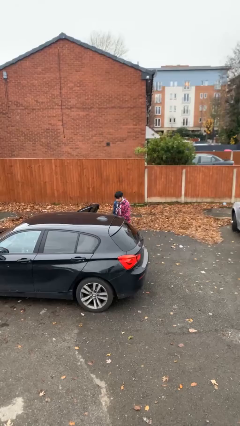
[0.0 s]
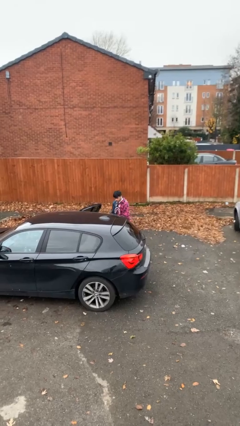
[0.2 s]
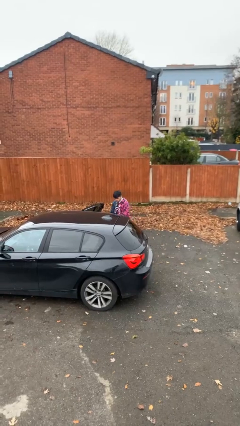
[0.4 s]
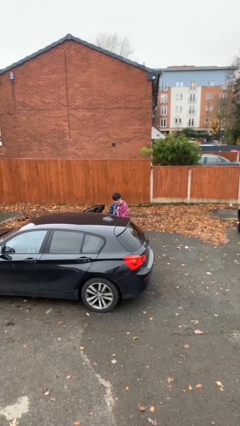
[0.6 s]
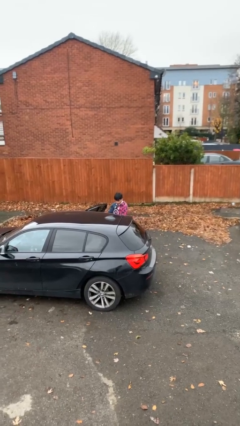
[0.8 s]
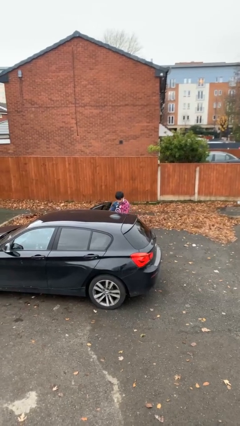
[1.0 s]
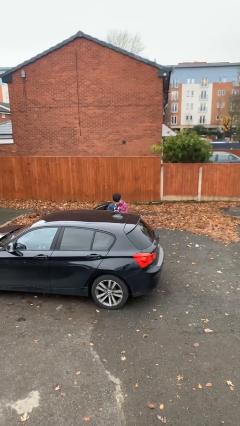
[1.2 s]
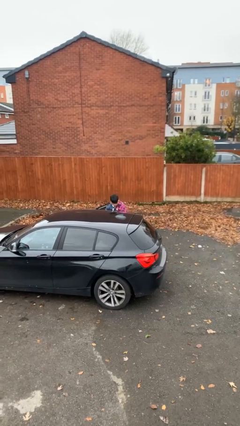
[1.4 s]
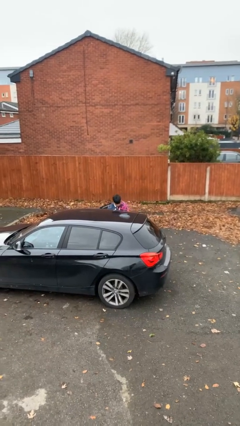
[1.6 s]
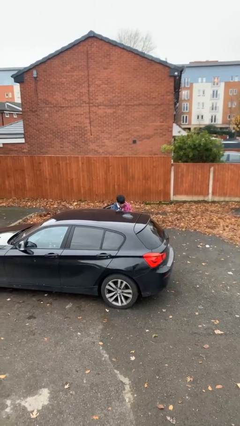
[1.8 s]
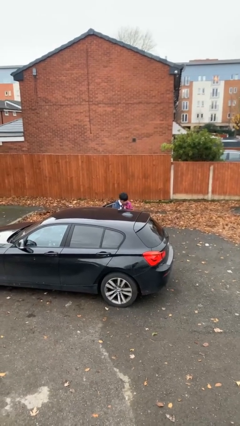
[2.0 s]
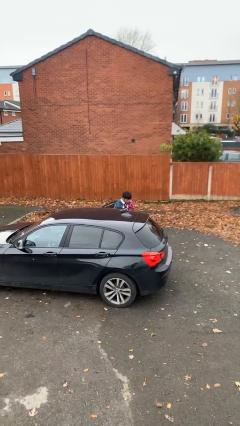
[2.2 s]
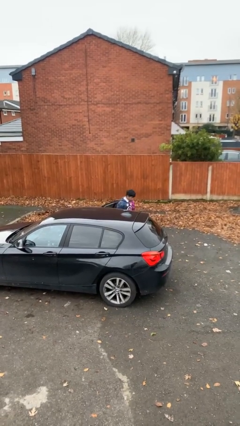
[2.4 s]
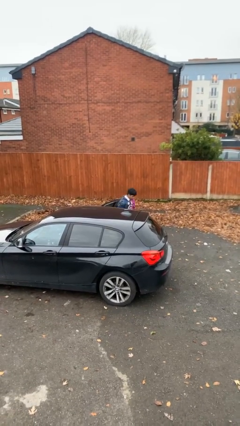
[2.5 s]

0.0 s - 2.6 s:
person loads car

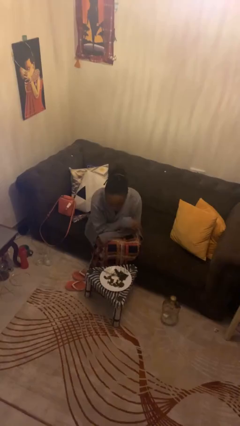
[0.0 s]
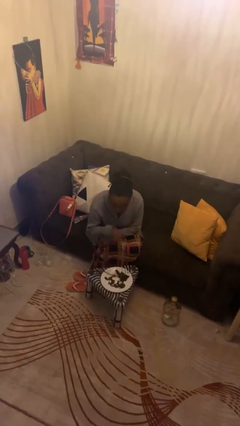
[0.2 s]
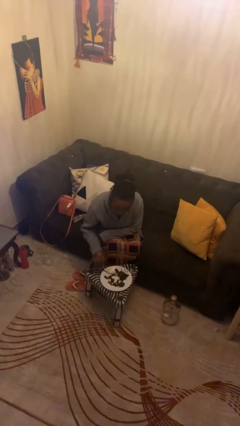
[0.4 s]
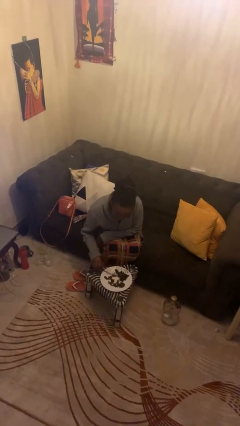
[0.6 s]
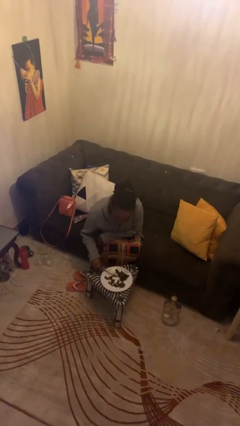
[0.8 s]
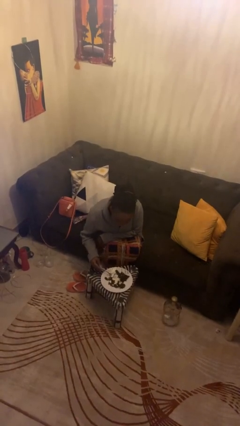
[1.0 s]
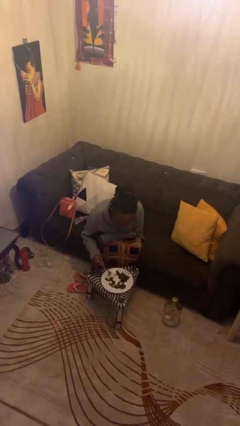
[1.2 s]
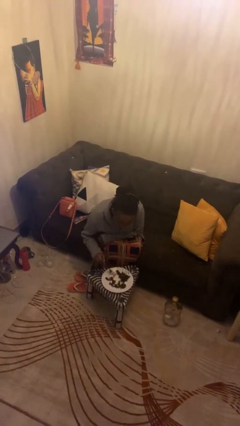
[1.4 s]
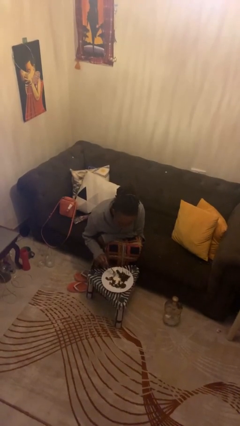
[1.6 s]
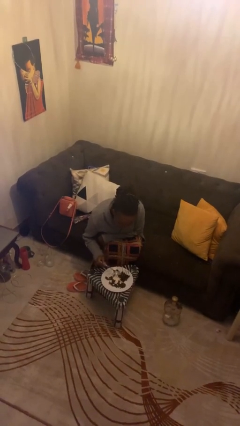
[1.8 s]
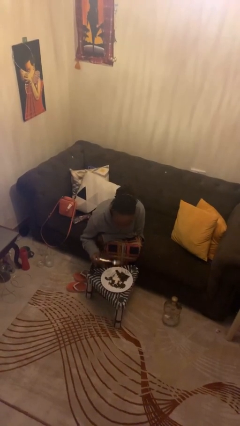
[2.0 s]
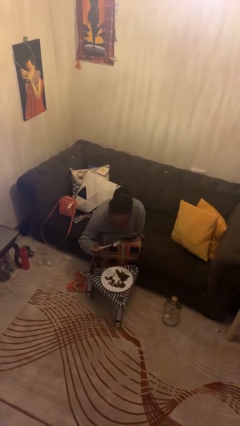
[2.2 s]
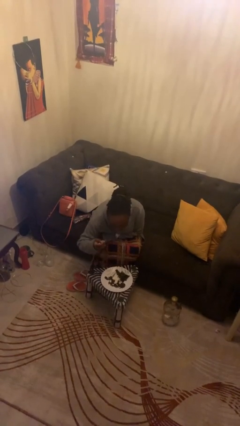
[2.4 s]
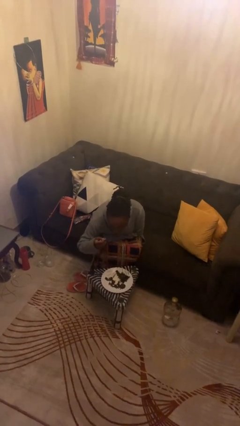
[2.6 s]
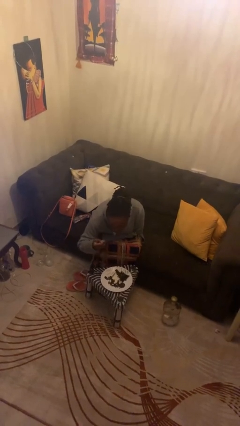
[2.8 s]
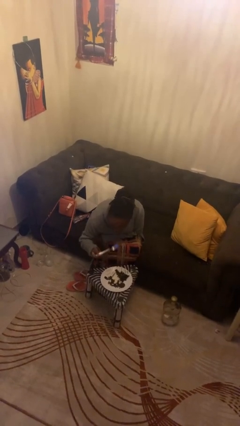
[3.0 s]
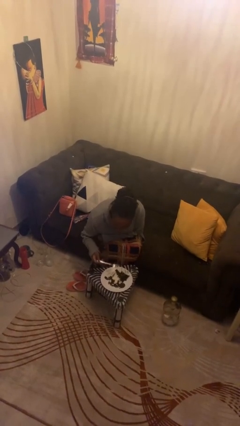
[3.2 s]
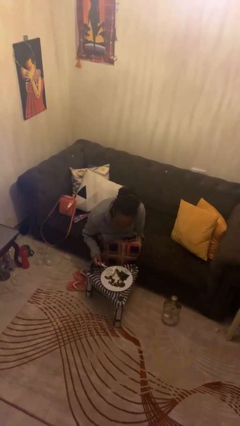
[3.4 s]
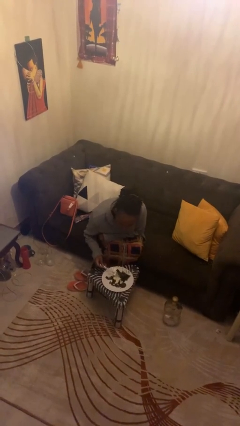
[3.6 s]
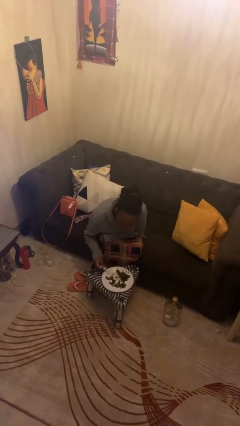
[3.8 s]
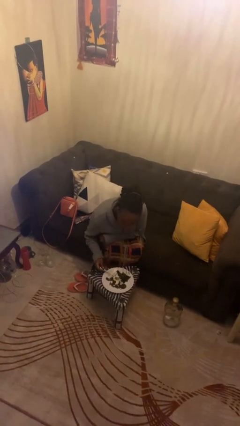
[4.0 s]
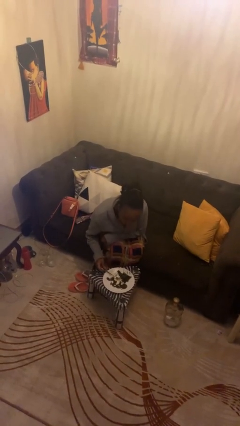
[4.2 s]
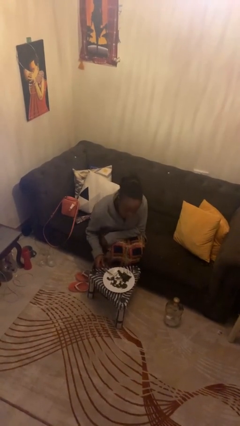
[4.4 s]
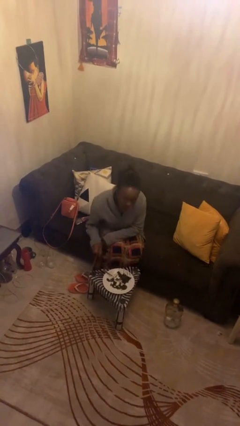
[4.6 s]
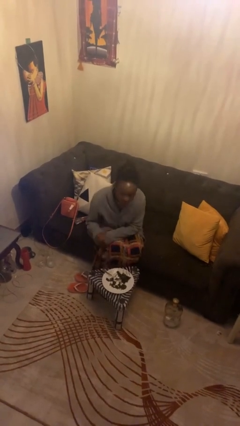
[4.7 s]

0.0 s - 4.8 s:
person eats with utensil

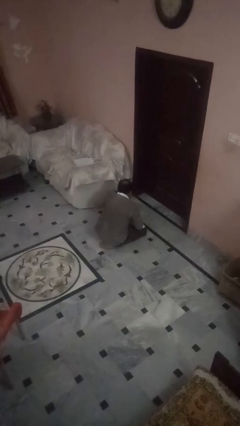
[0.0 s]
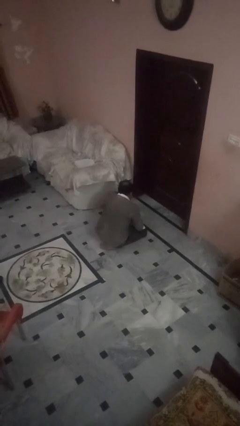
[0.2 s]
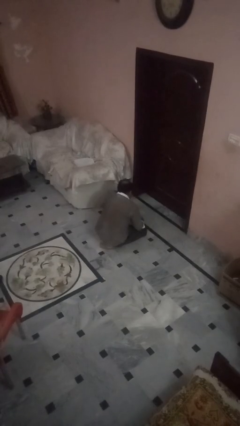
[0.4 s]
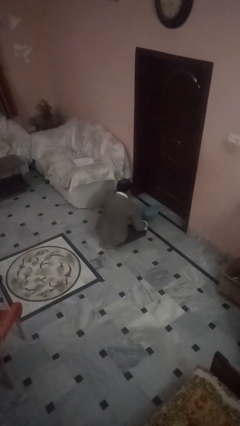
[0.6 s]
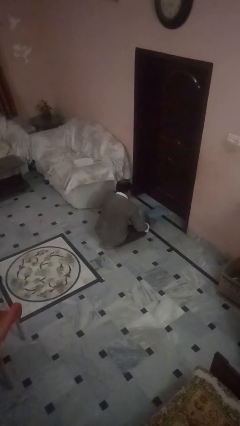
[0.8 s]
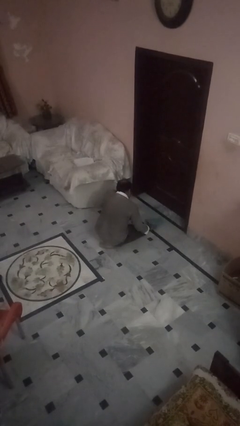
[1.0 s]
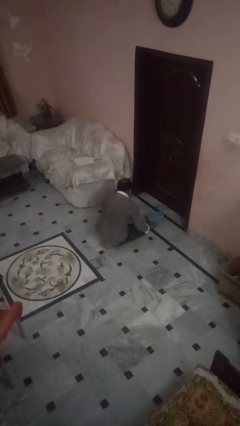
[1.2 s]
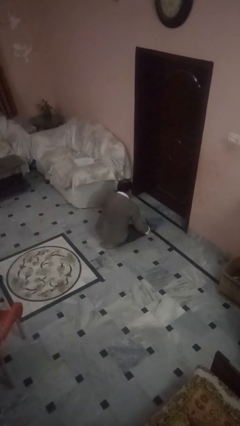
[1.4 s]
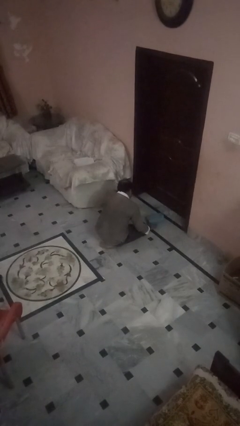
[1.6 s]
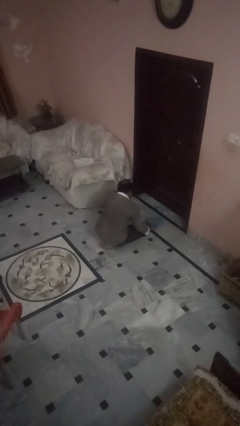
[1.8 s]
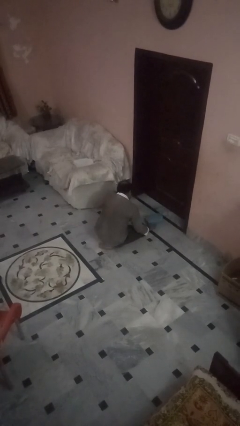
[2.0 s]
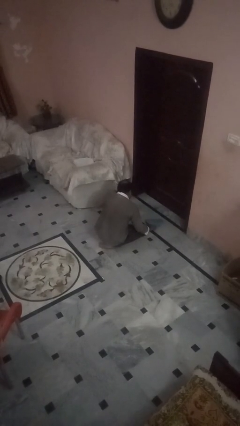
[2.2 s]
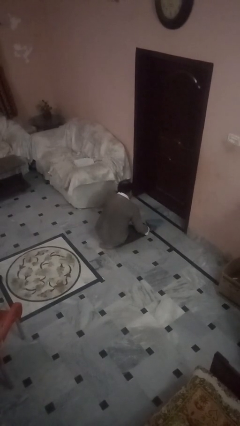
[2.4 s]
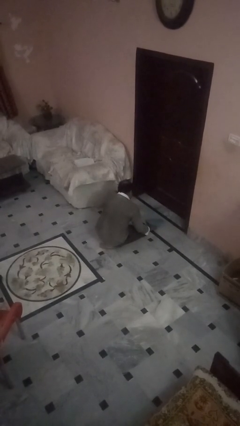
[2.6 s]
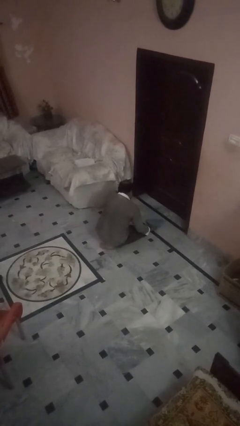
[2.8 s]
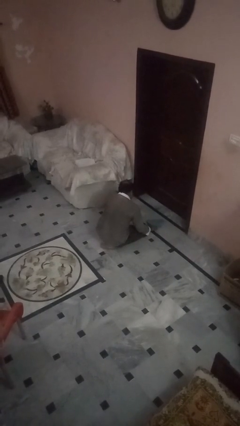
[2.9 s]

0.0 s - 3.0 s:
person swats bug

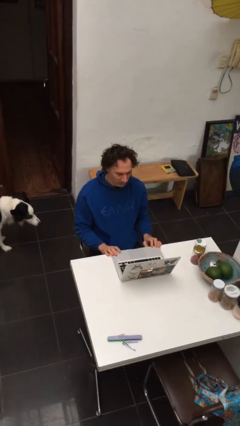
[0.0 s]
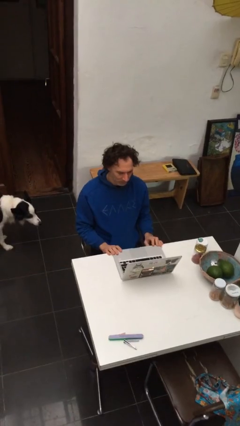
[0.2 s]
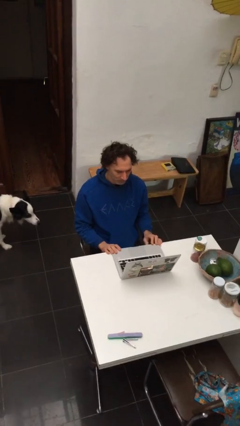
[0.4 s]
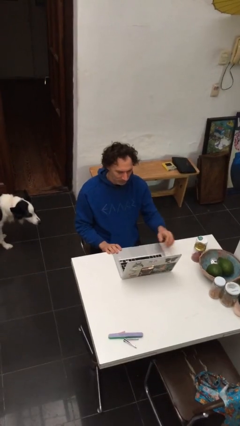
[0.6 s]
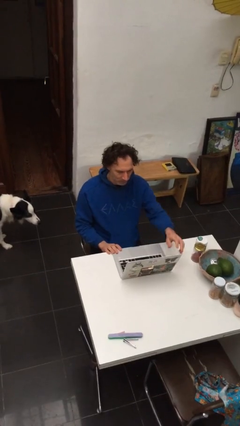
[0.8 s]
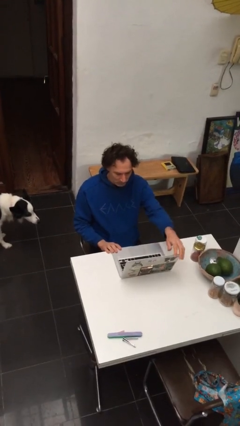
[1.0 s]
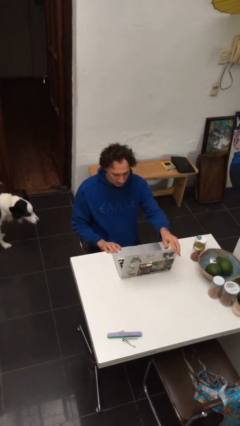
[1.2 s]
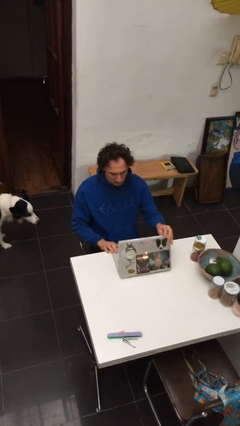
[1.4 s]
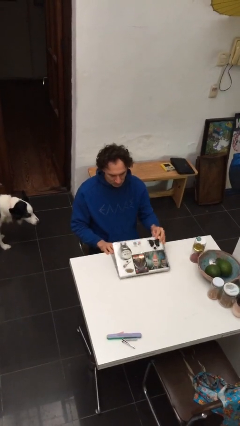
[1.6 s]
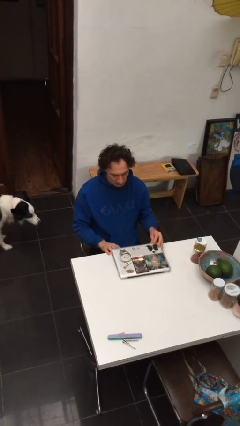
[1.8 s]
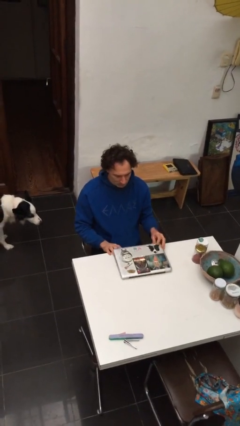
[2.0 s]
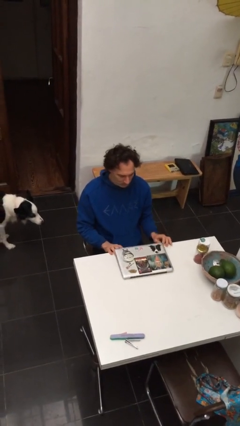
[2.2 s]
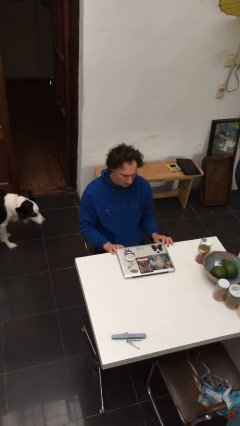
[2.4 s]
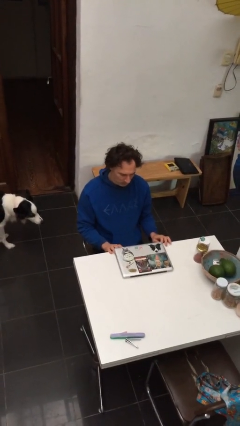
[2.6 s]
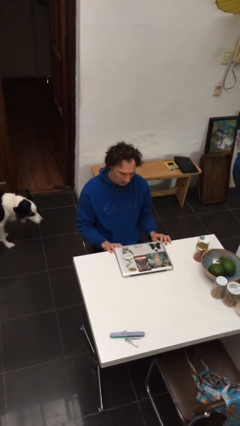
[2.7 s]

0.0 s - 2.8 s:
person closes laptop

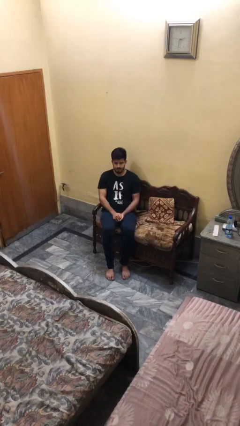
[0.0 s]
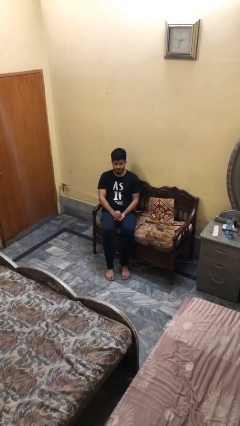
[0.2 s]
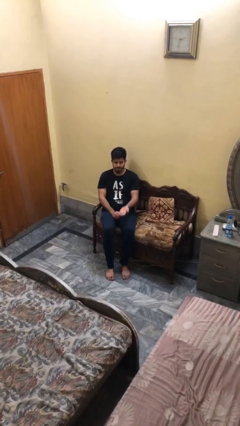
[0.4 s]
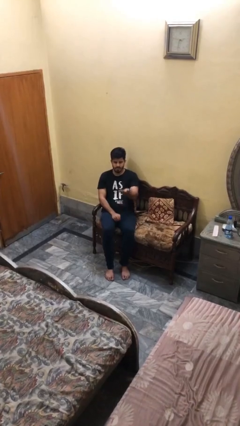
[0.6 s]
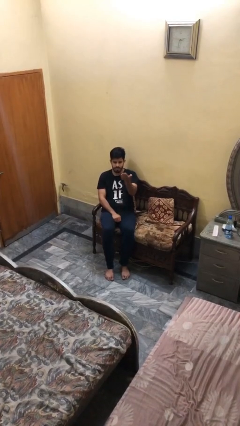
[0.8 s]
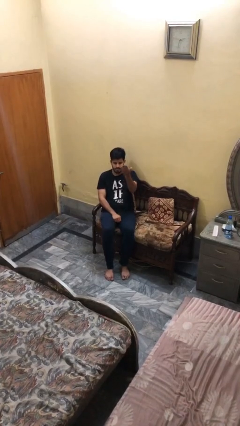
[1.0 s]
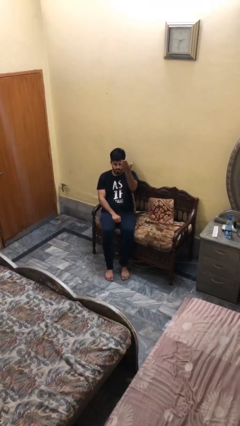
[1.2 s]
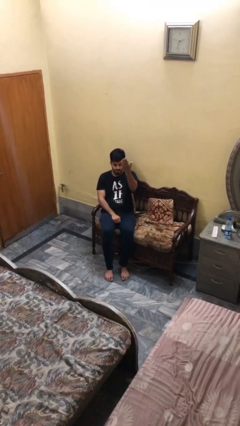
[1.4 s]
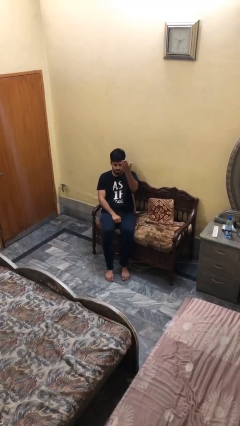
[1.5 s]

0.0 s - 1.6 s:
person gestures swipe up

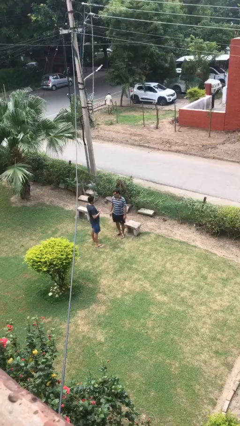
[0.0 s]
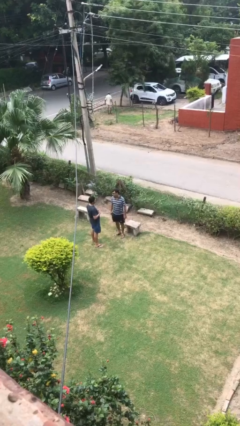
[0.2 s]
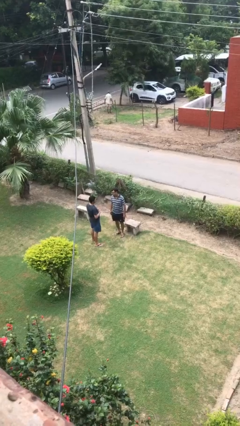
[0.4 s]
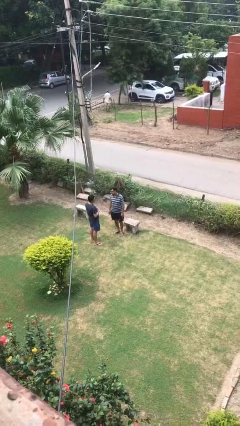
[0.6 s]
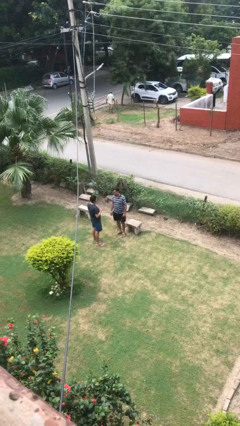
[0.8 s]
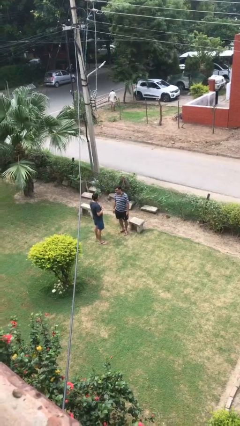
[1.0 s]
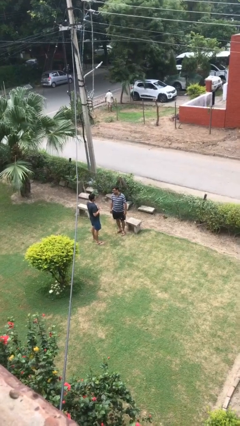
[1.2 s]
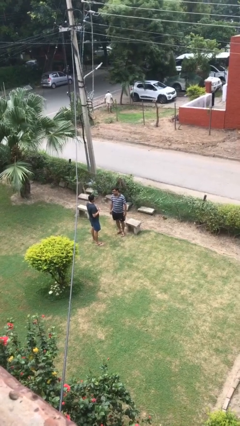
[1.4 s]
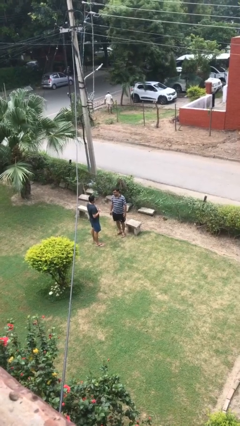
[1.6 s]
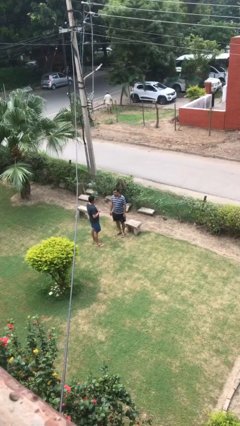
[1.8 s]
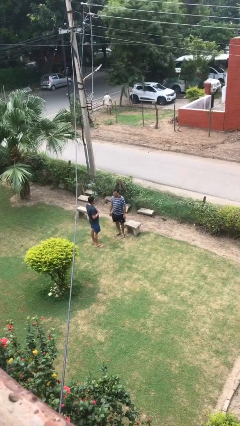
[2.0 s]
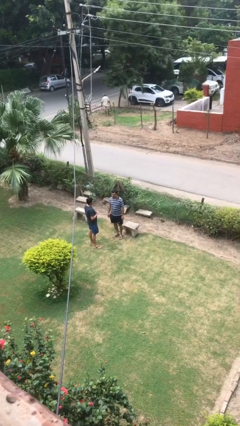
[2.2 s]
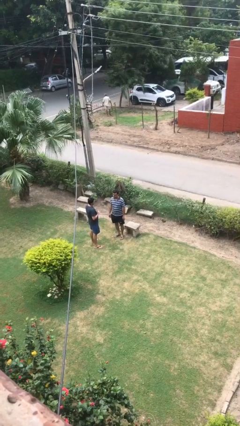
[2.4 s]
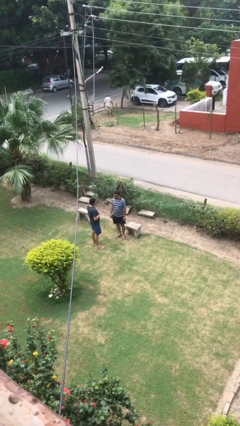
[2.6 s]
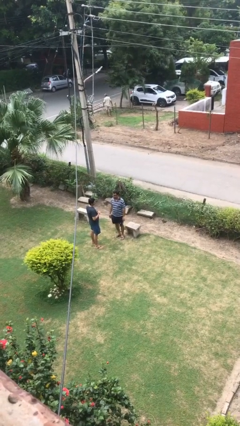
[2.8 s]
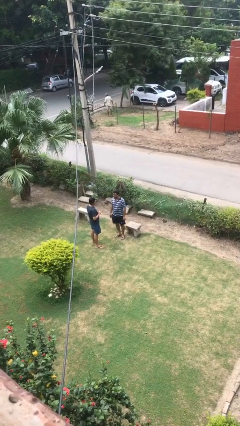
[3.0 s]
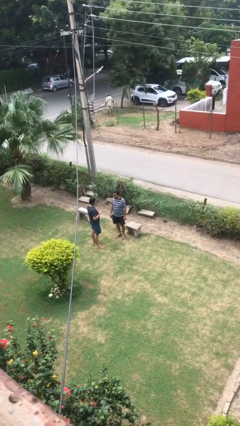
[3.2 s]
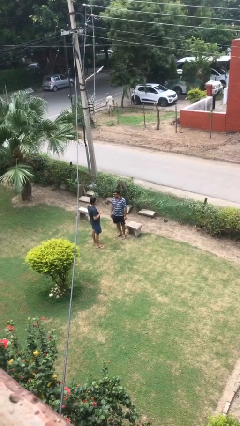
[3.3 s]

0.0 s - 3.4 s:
person talks to person
